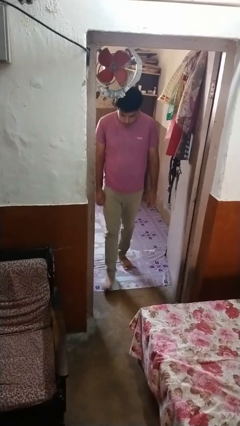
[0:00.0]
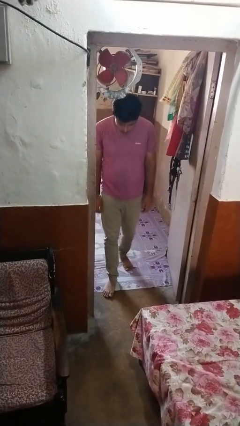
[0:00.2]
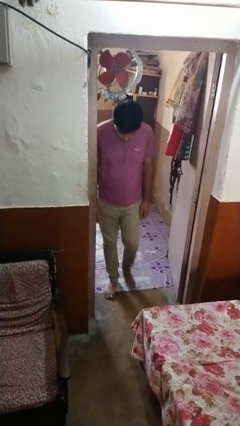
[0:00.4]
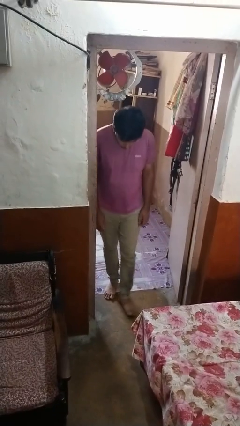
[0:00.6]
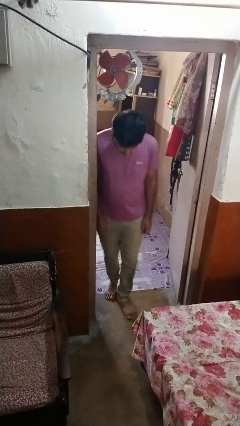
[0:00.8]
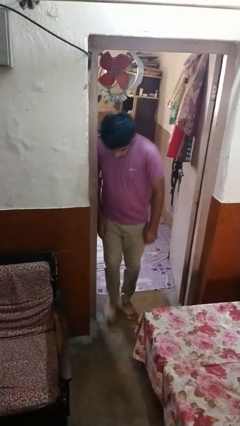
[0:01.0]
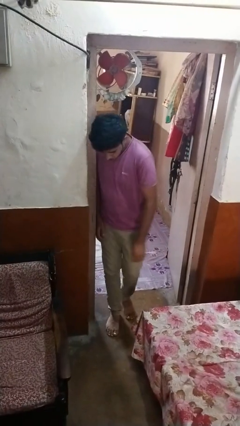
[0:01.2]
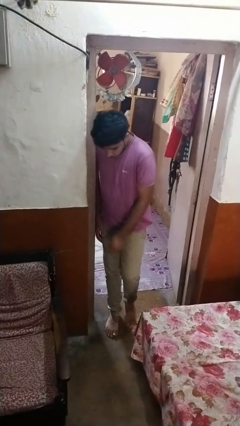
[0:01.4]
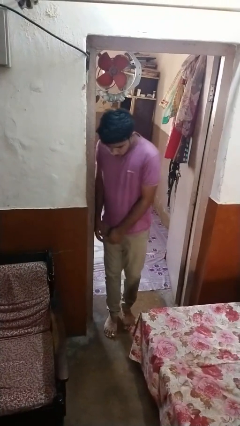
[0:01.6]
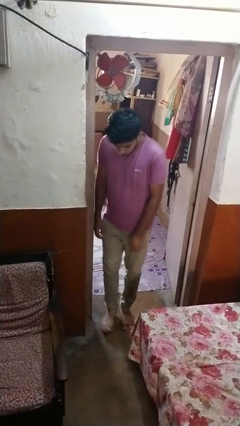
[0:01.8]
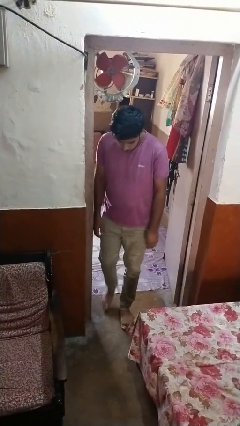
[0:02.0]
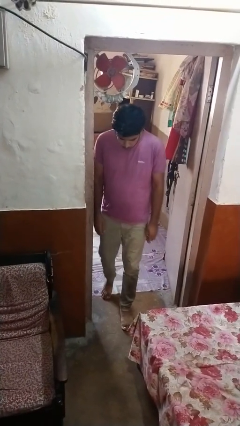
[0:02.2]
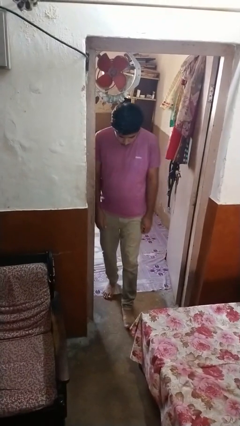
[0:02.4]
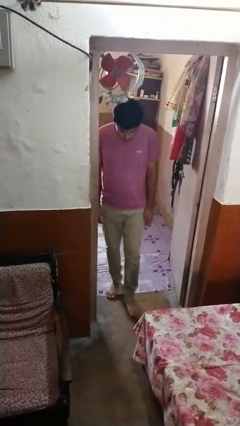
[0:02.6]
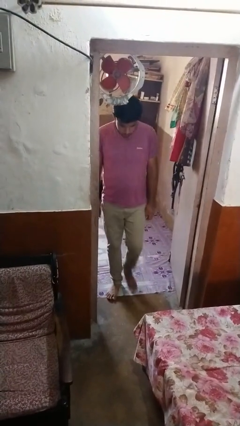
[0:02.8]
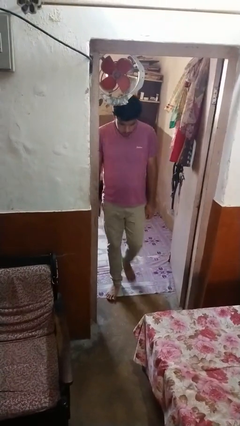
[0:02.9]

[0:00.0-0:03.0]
person bumps into wall

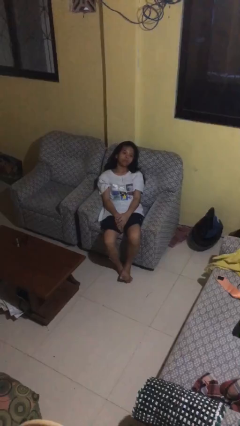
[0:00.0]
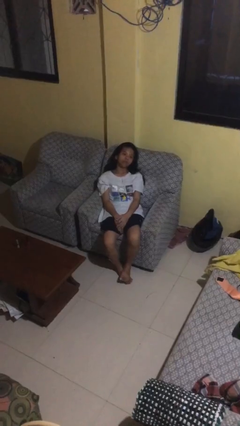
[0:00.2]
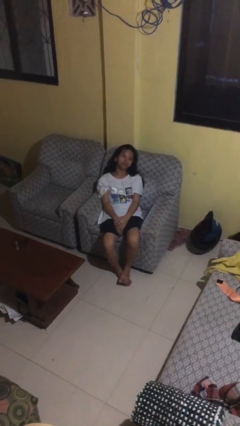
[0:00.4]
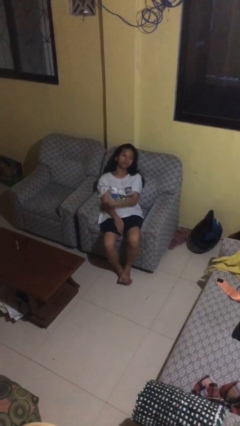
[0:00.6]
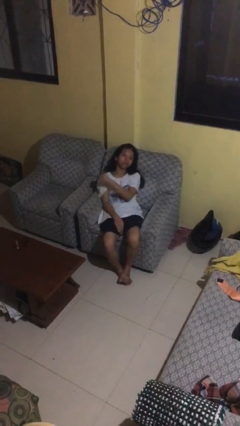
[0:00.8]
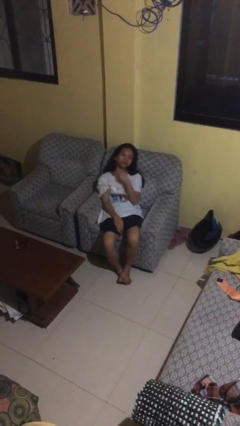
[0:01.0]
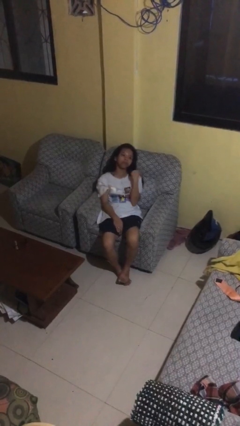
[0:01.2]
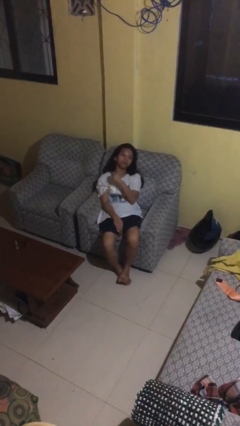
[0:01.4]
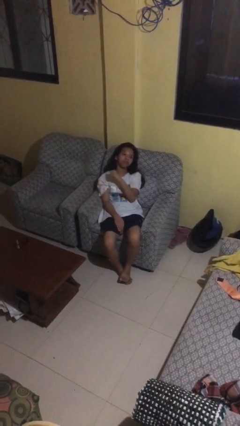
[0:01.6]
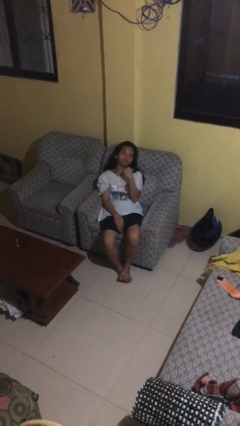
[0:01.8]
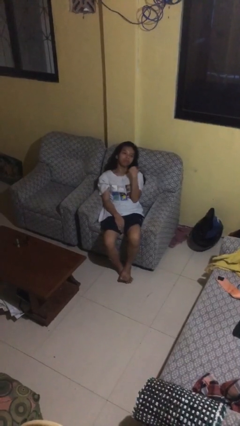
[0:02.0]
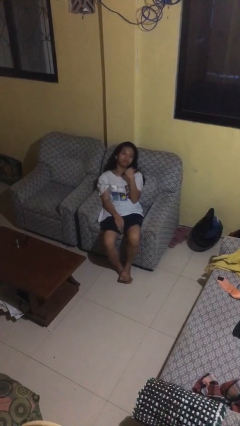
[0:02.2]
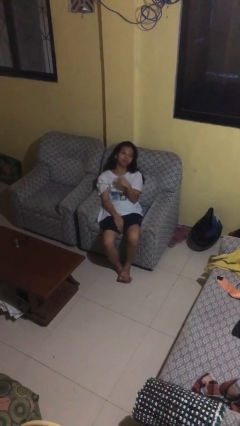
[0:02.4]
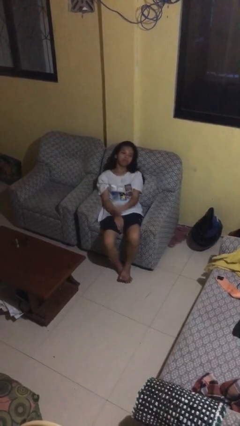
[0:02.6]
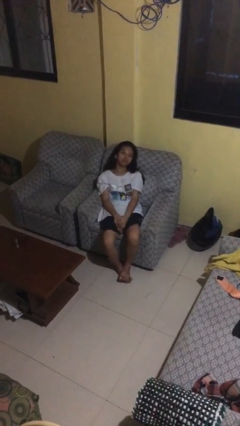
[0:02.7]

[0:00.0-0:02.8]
person gestures cut

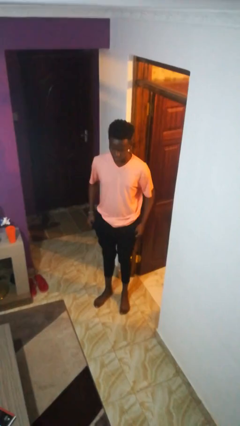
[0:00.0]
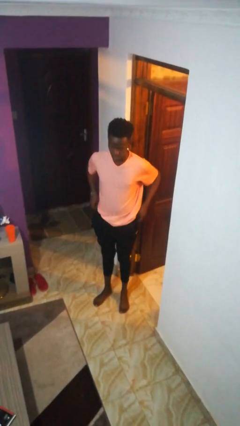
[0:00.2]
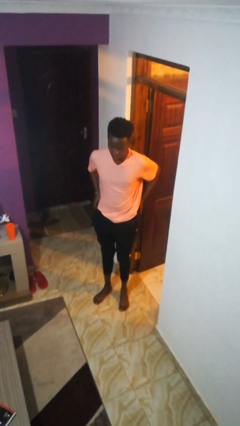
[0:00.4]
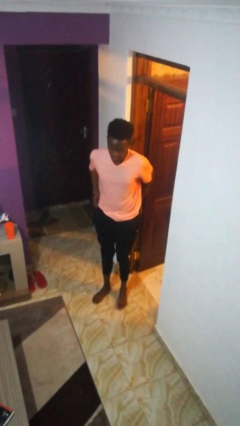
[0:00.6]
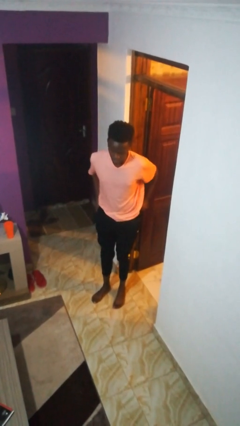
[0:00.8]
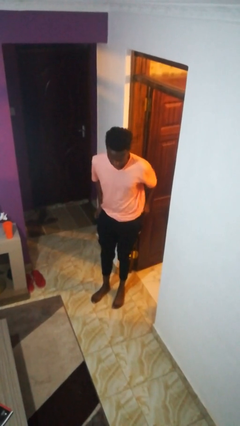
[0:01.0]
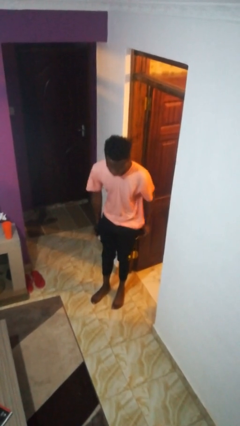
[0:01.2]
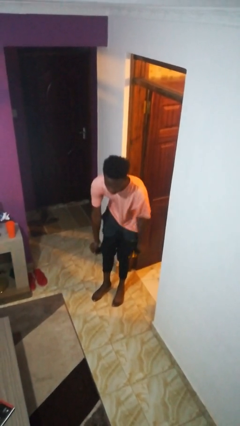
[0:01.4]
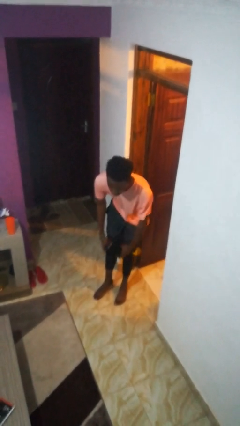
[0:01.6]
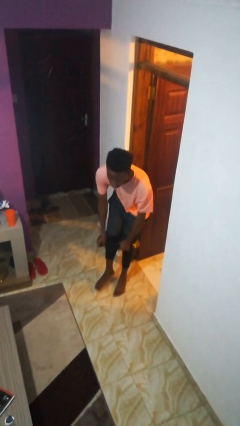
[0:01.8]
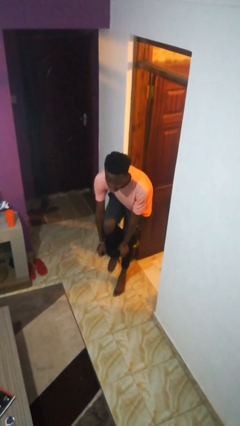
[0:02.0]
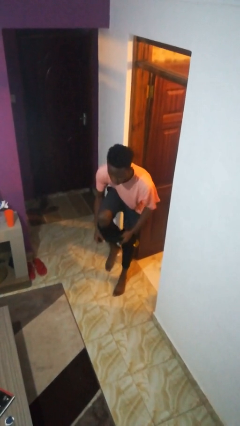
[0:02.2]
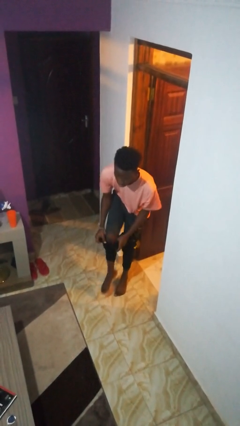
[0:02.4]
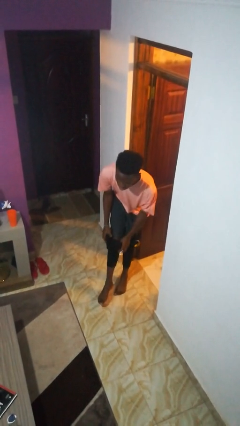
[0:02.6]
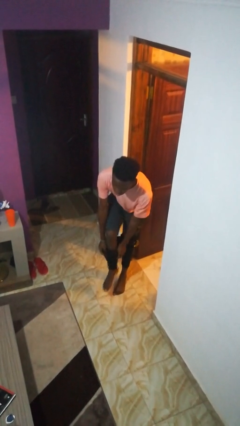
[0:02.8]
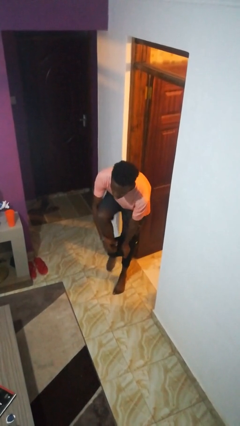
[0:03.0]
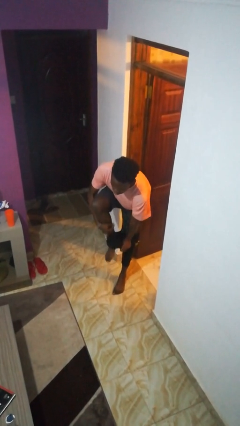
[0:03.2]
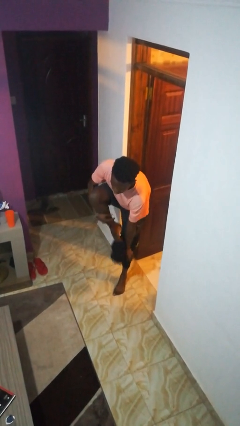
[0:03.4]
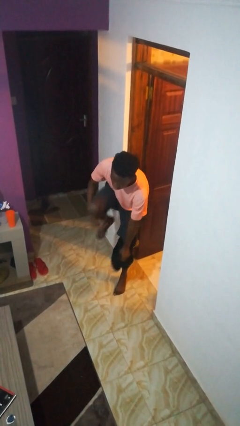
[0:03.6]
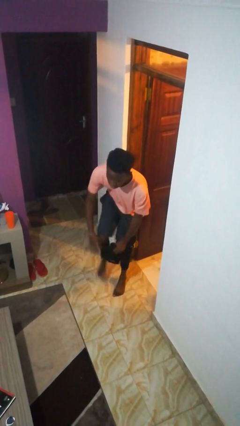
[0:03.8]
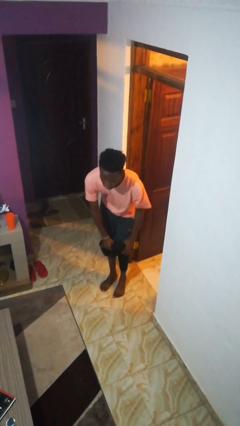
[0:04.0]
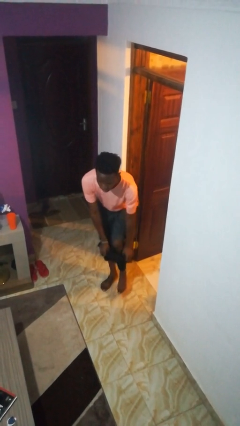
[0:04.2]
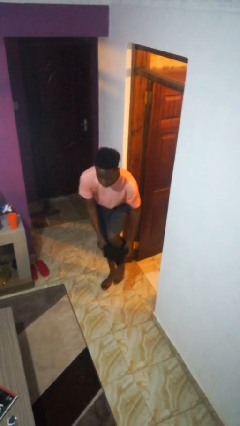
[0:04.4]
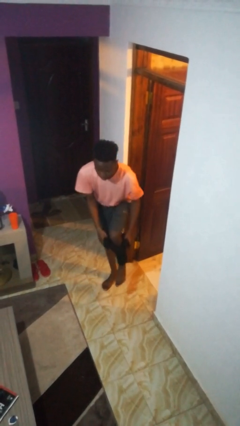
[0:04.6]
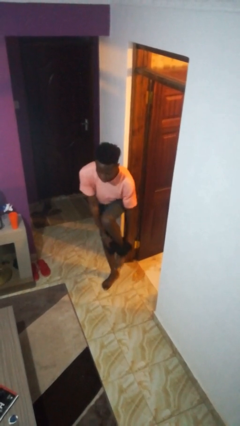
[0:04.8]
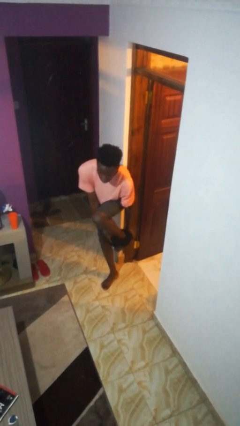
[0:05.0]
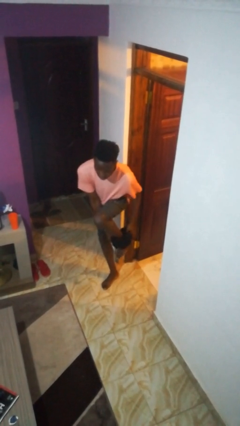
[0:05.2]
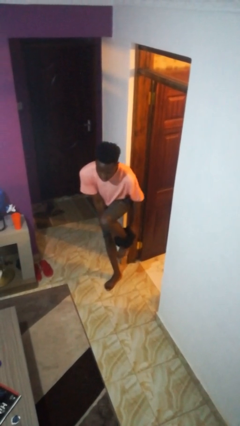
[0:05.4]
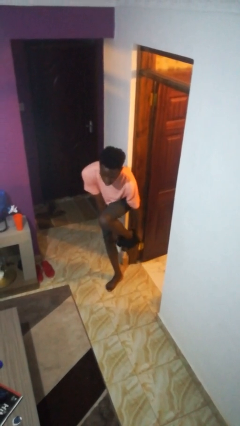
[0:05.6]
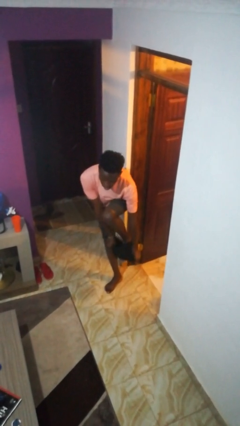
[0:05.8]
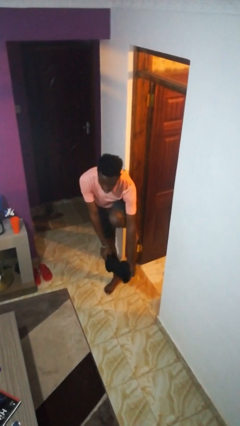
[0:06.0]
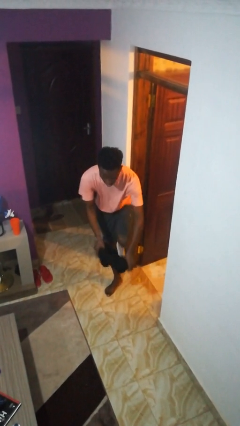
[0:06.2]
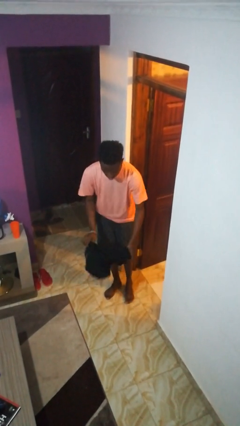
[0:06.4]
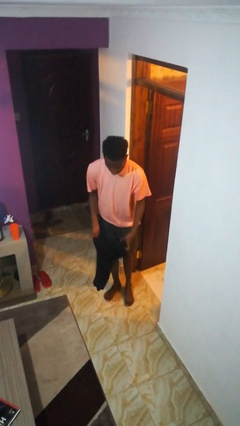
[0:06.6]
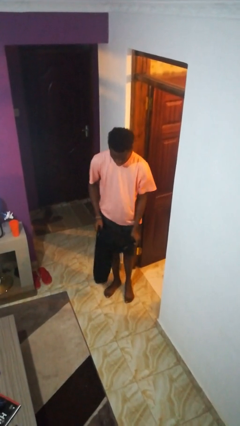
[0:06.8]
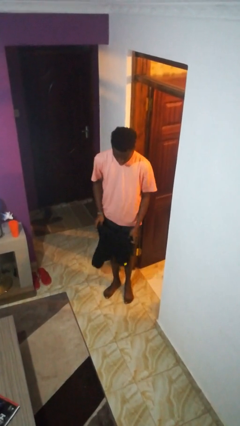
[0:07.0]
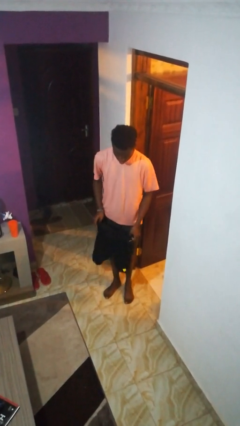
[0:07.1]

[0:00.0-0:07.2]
person takes off pants

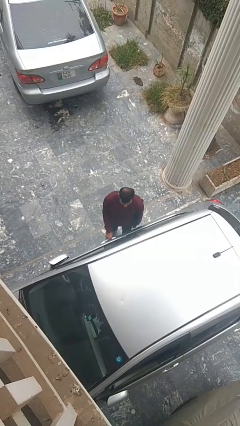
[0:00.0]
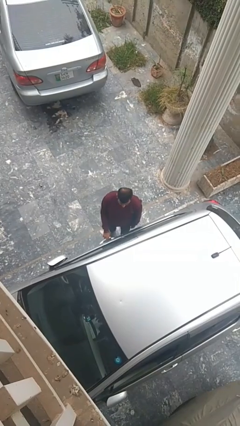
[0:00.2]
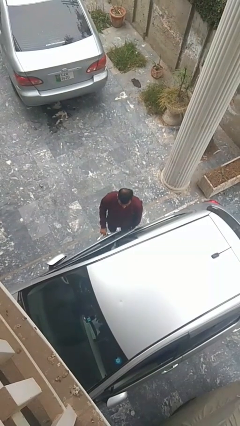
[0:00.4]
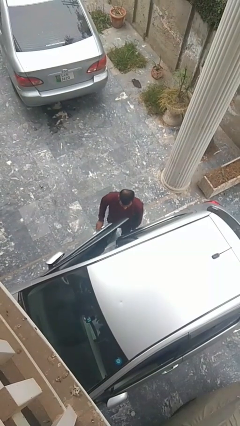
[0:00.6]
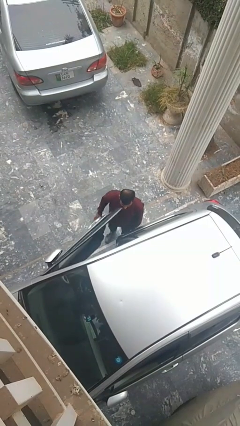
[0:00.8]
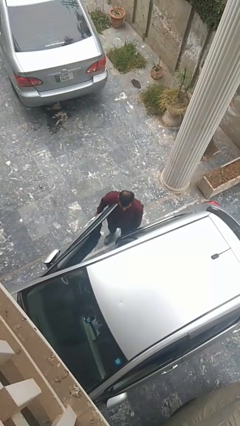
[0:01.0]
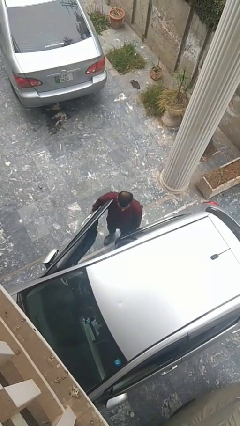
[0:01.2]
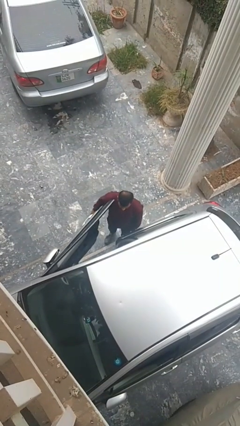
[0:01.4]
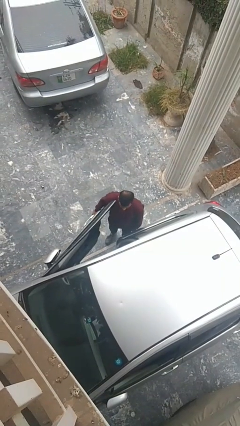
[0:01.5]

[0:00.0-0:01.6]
person opens car door

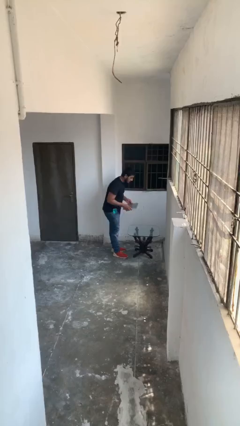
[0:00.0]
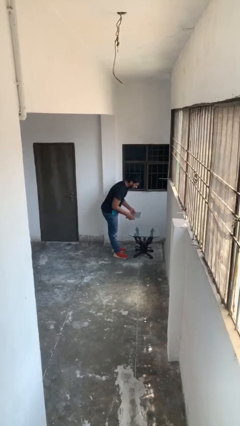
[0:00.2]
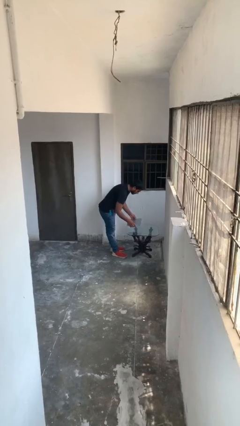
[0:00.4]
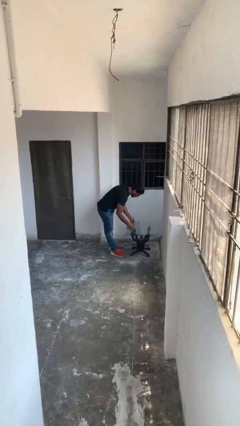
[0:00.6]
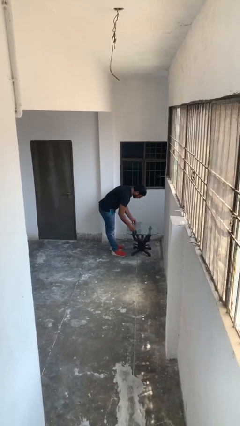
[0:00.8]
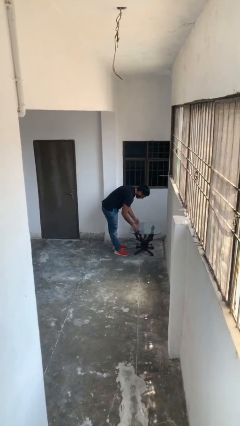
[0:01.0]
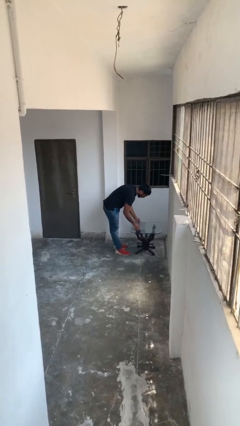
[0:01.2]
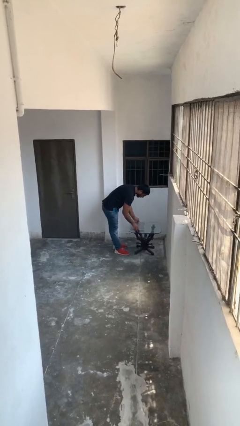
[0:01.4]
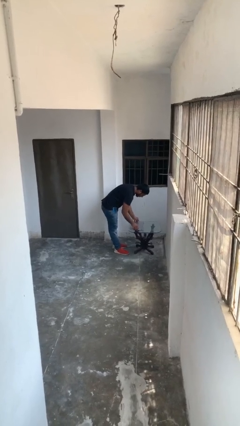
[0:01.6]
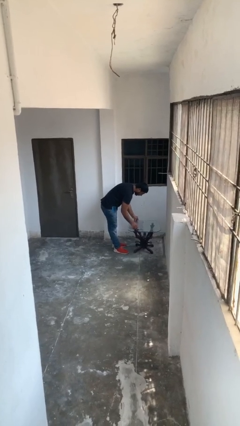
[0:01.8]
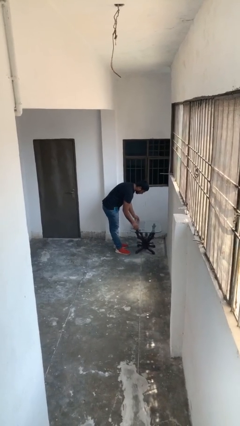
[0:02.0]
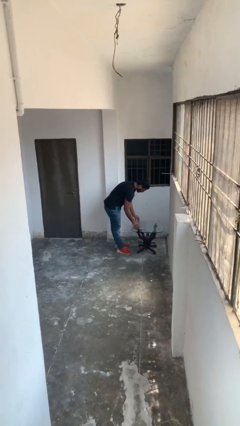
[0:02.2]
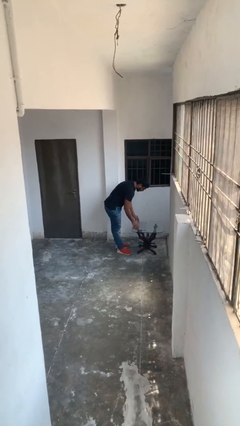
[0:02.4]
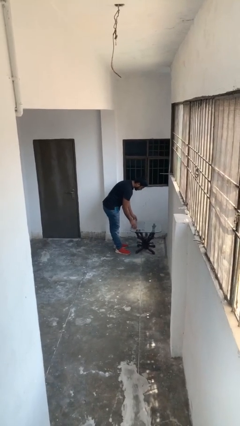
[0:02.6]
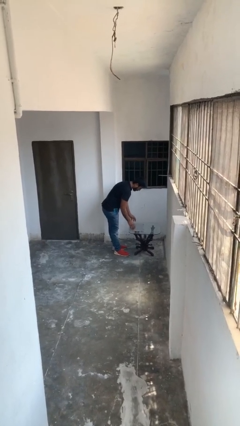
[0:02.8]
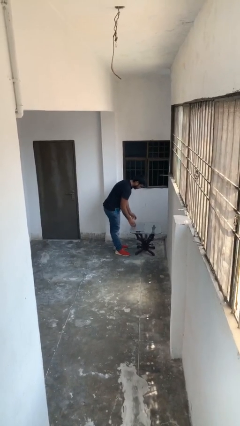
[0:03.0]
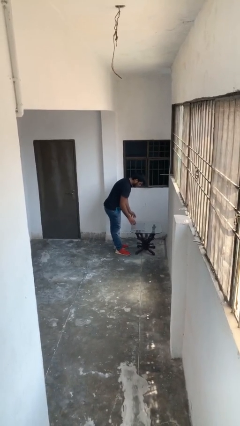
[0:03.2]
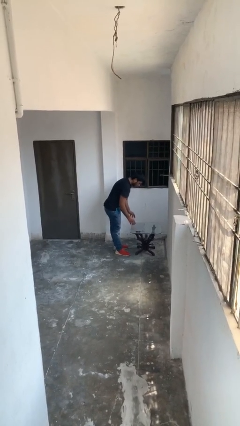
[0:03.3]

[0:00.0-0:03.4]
person puts down object on table
